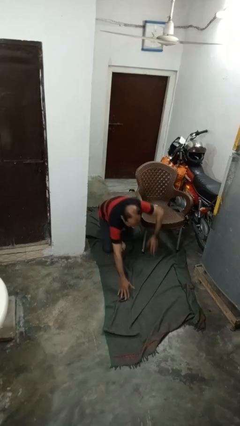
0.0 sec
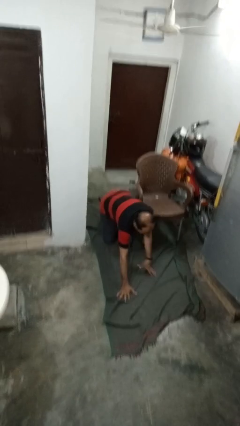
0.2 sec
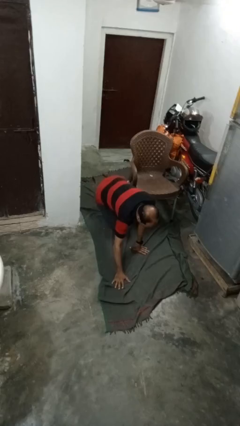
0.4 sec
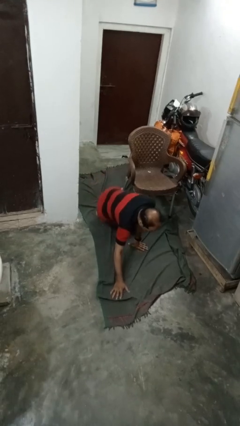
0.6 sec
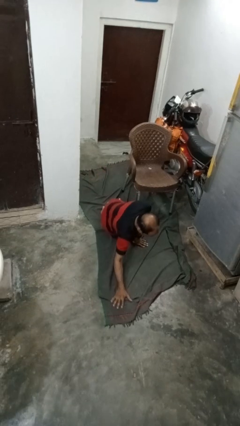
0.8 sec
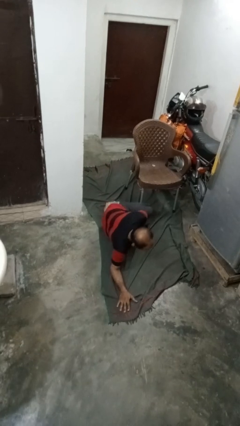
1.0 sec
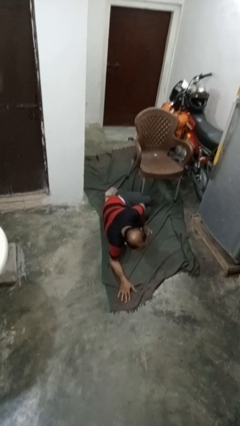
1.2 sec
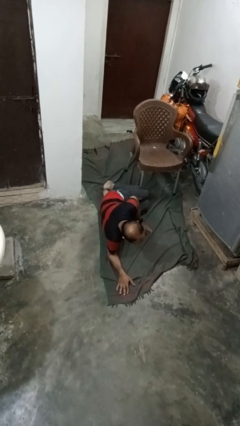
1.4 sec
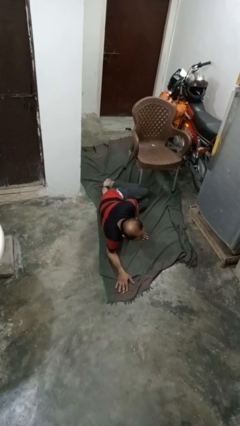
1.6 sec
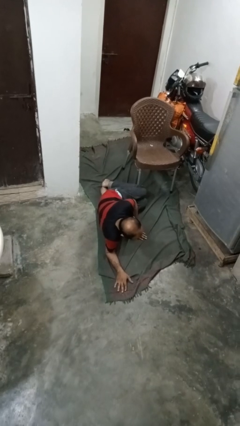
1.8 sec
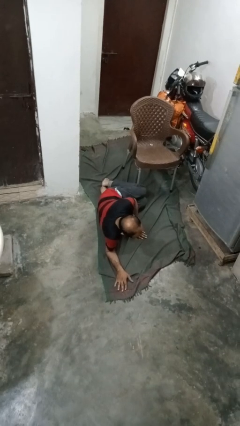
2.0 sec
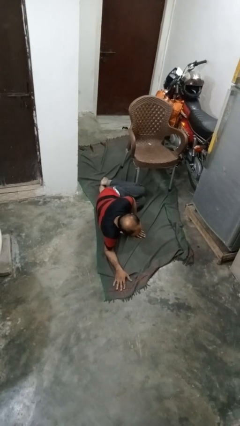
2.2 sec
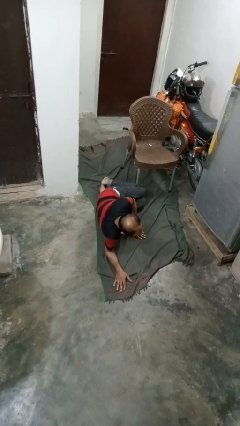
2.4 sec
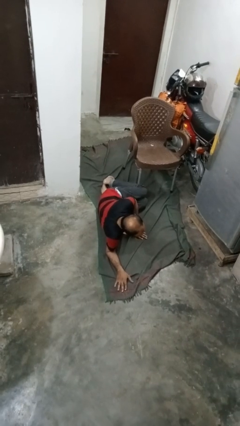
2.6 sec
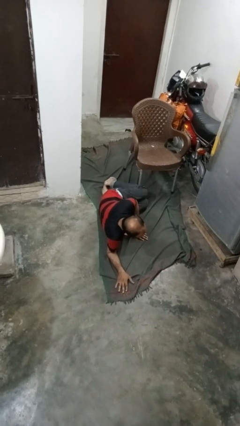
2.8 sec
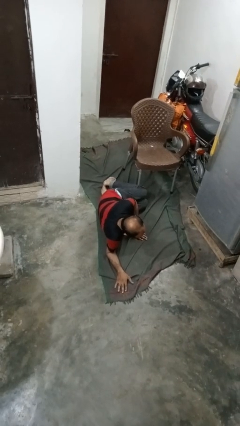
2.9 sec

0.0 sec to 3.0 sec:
person lies down on floor

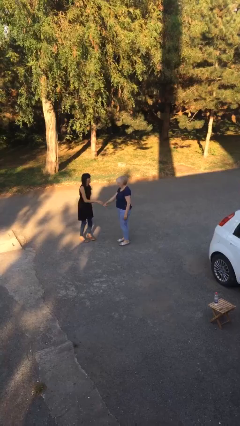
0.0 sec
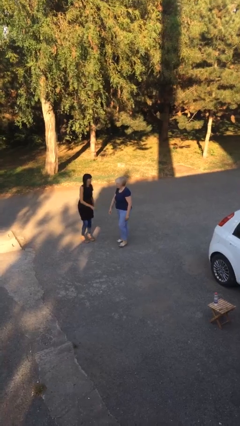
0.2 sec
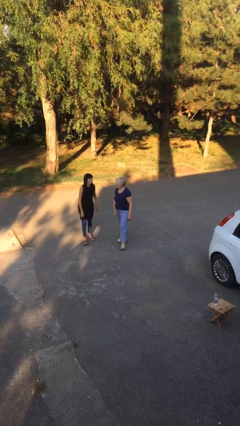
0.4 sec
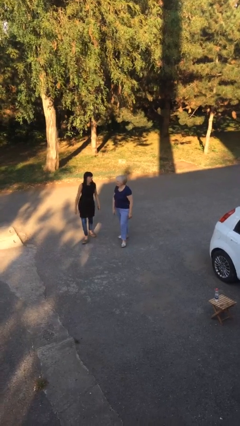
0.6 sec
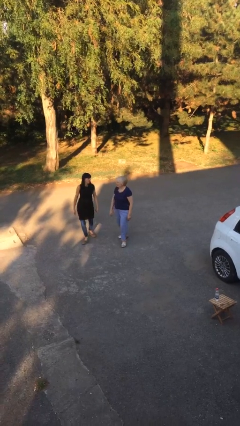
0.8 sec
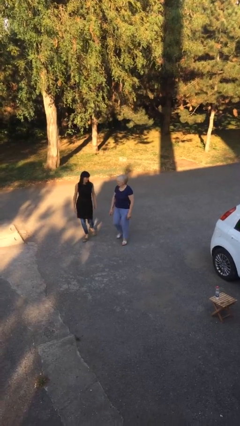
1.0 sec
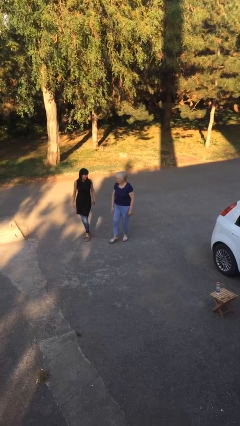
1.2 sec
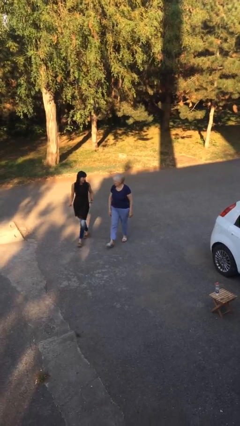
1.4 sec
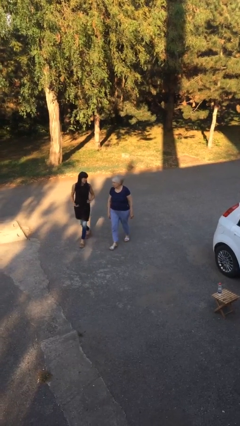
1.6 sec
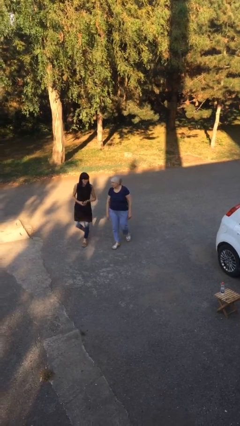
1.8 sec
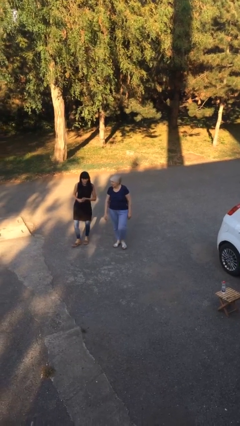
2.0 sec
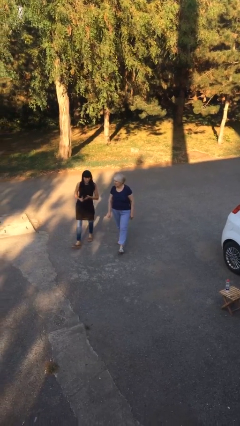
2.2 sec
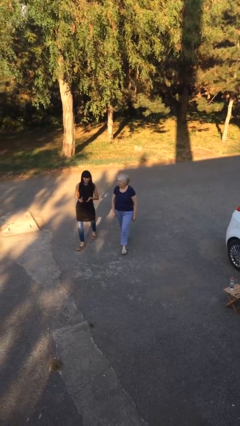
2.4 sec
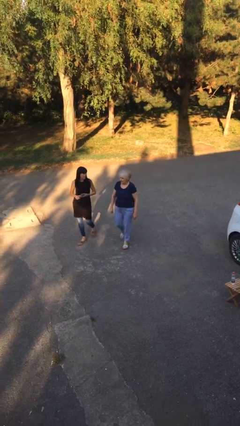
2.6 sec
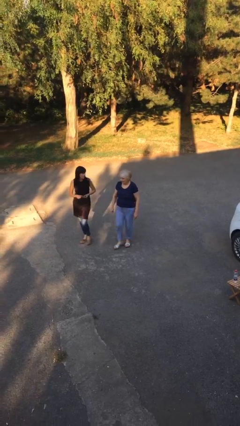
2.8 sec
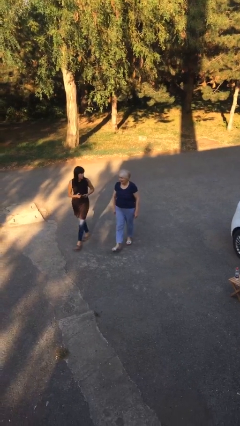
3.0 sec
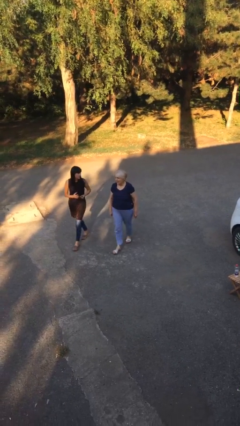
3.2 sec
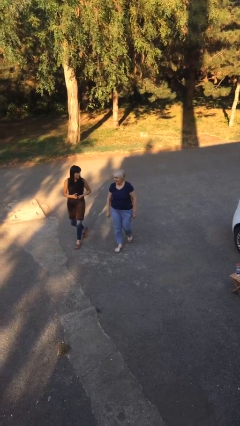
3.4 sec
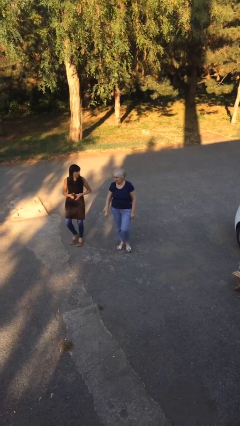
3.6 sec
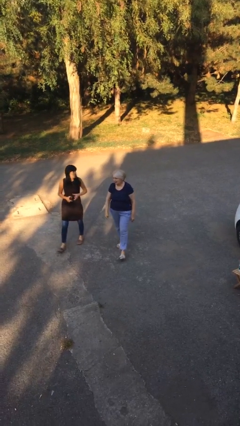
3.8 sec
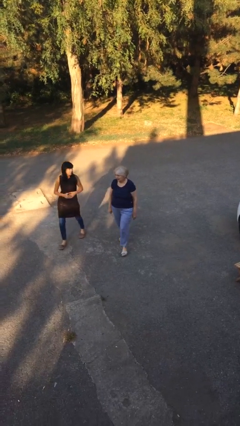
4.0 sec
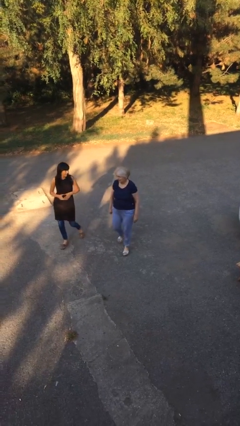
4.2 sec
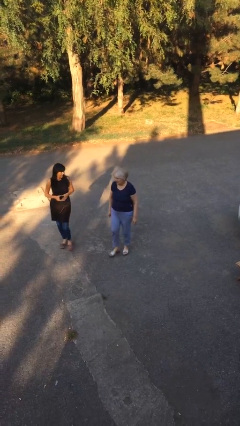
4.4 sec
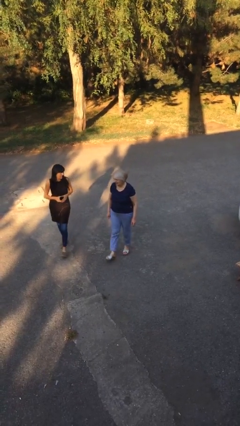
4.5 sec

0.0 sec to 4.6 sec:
person talks to person

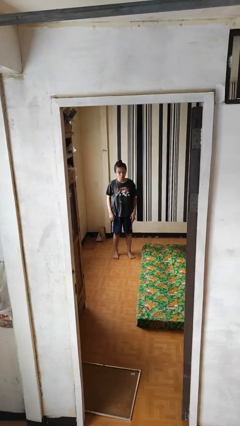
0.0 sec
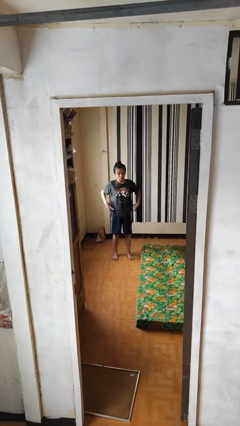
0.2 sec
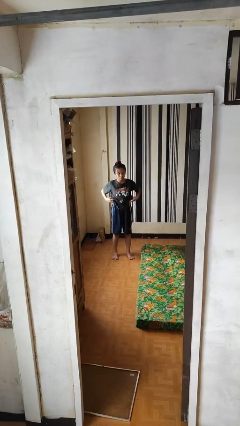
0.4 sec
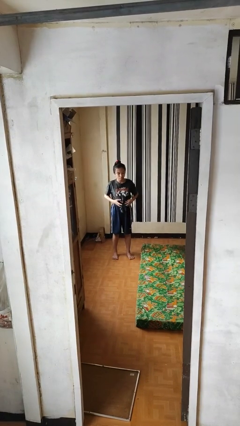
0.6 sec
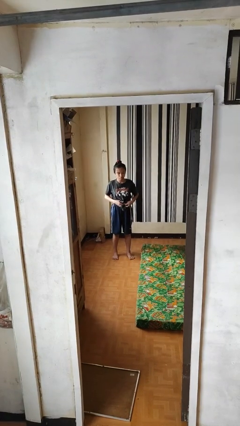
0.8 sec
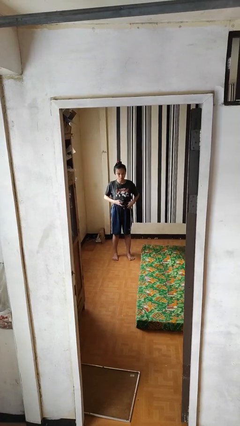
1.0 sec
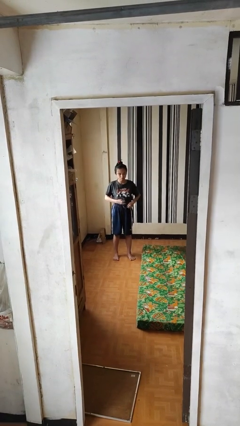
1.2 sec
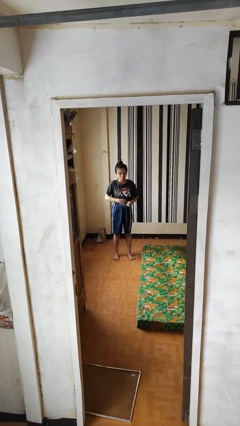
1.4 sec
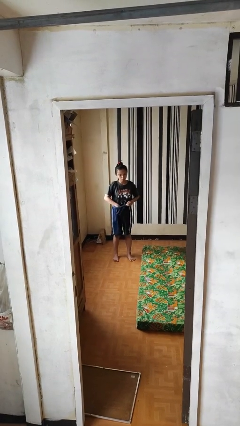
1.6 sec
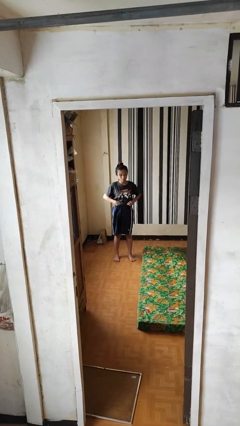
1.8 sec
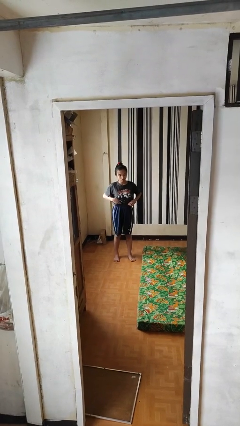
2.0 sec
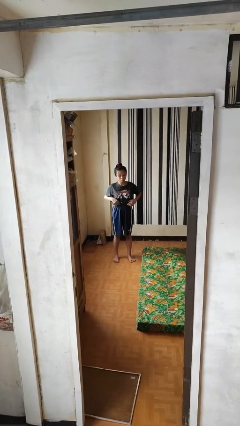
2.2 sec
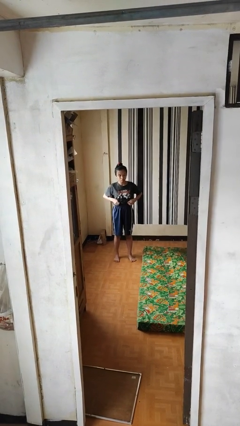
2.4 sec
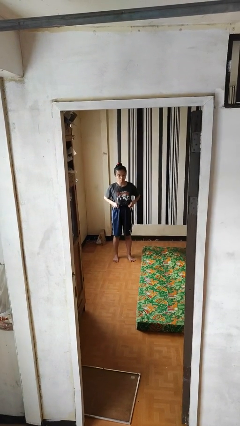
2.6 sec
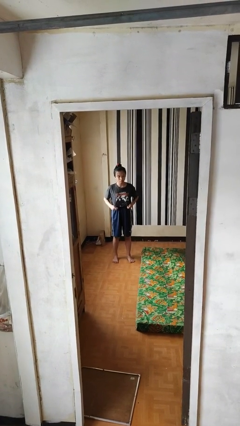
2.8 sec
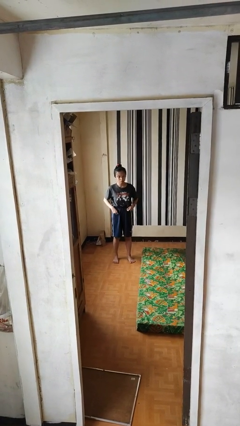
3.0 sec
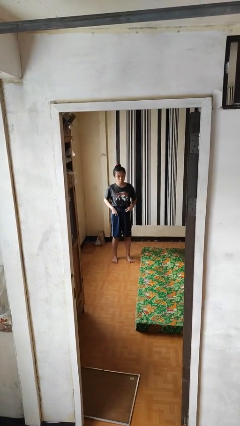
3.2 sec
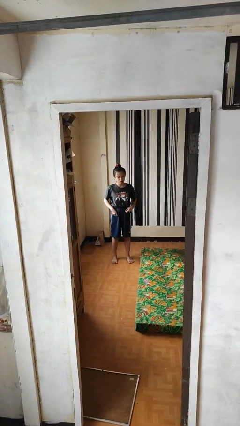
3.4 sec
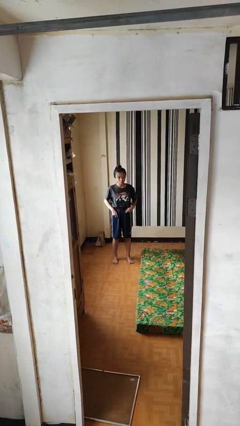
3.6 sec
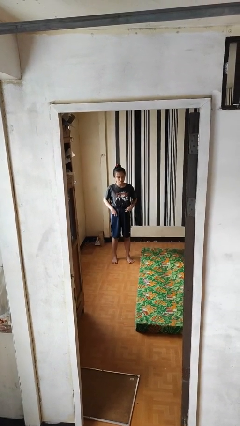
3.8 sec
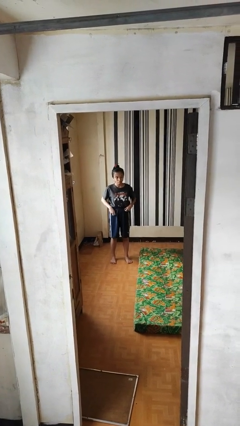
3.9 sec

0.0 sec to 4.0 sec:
person tucks in shirt

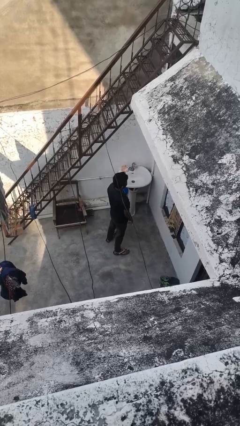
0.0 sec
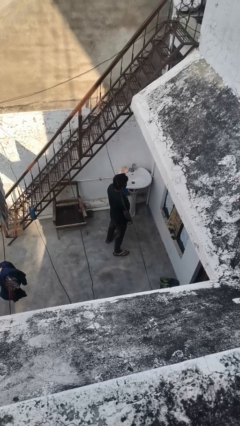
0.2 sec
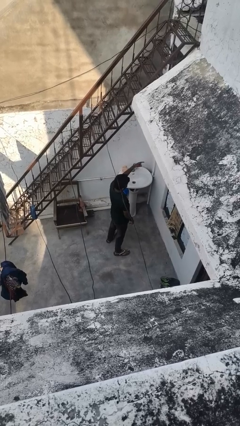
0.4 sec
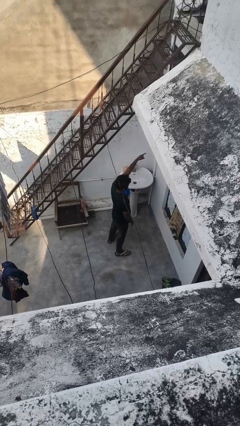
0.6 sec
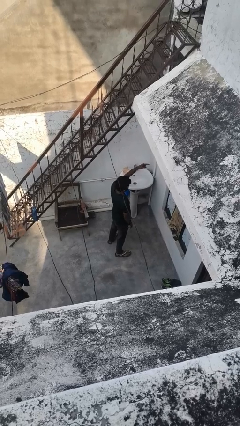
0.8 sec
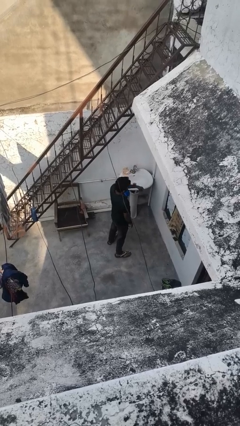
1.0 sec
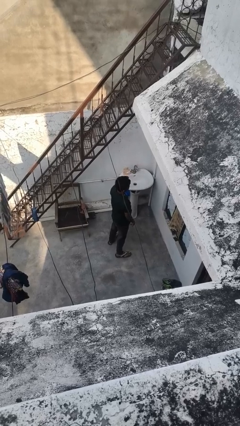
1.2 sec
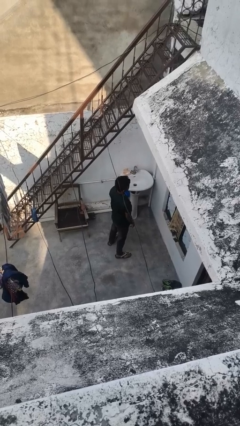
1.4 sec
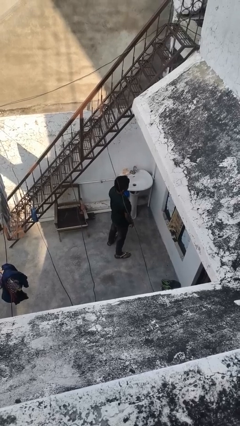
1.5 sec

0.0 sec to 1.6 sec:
person gestures behind me

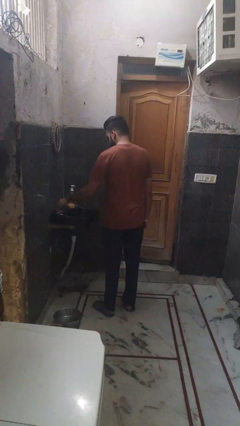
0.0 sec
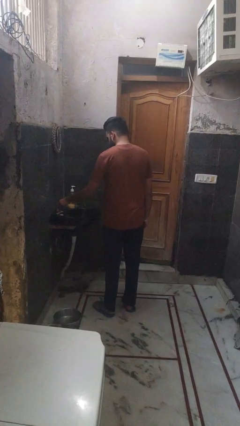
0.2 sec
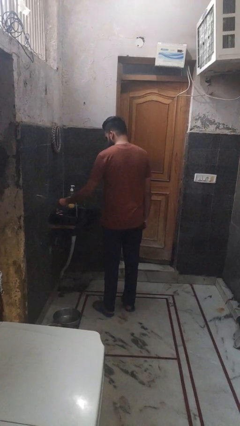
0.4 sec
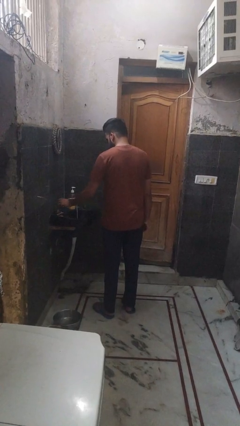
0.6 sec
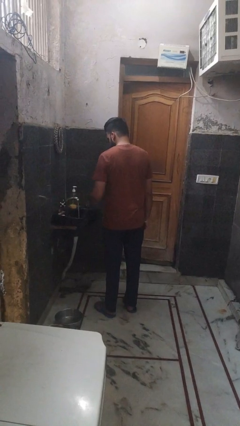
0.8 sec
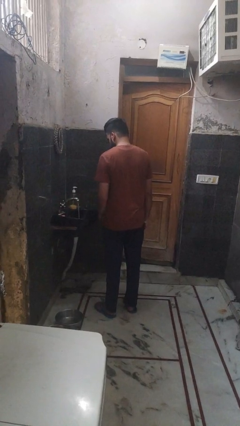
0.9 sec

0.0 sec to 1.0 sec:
person turns on faucet

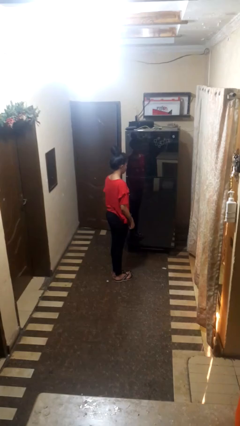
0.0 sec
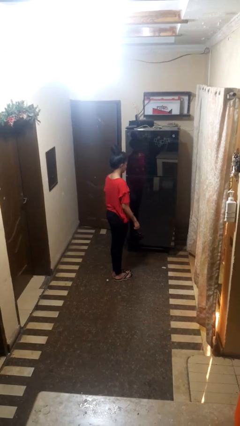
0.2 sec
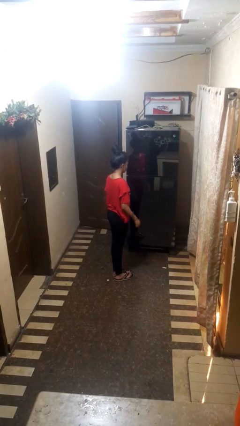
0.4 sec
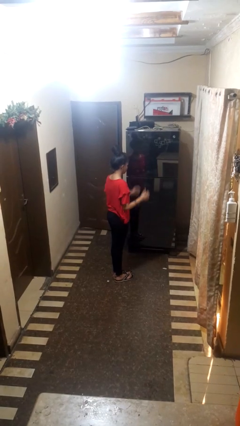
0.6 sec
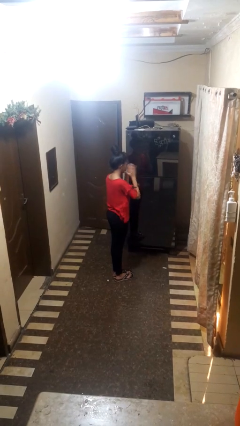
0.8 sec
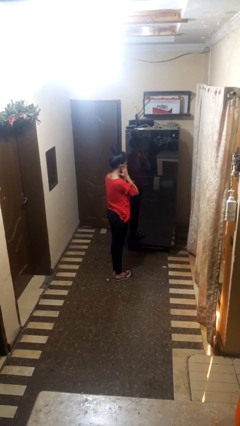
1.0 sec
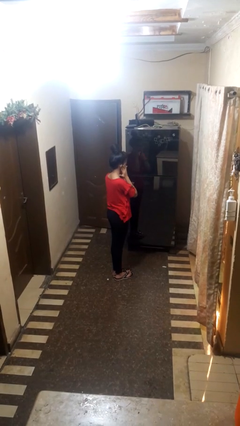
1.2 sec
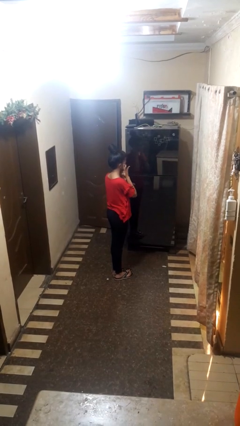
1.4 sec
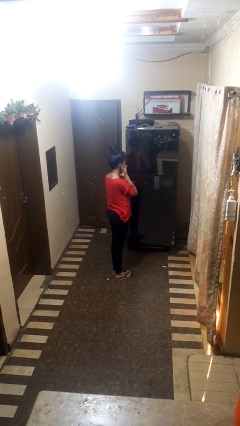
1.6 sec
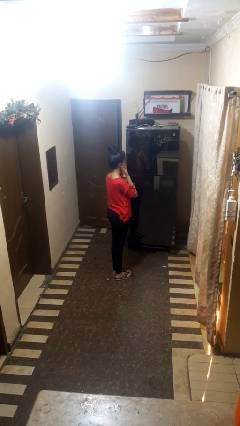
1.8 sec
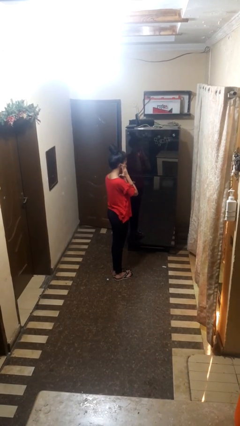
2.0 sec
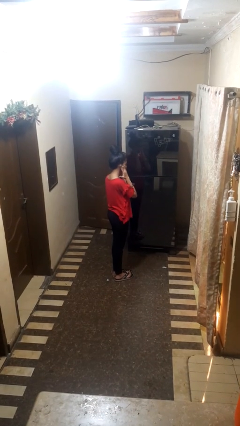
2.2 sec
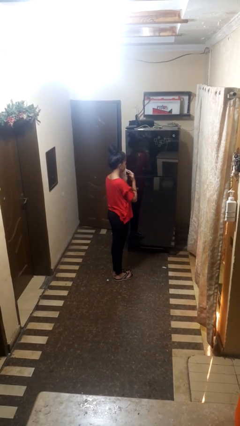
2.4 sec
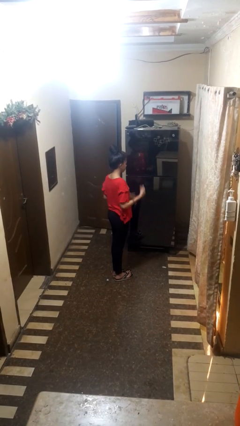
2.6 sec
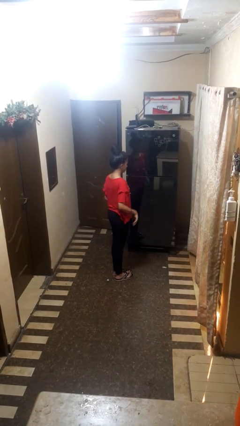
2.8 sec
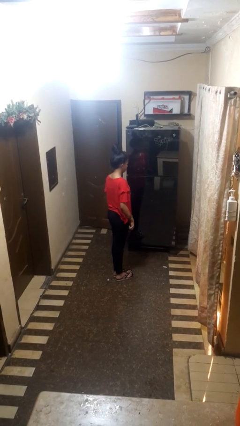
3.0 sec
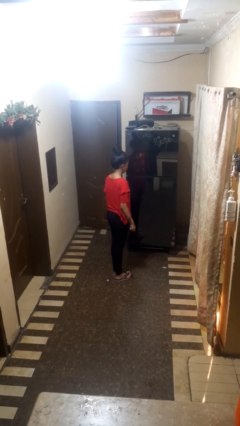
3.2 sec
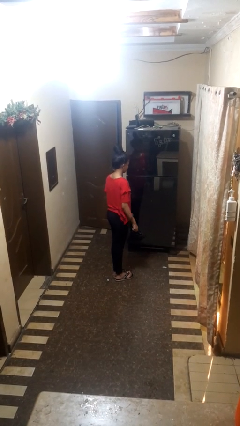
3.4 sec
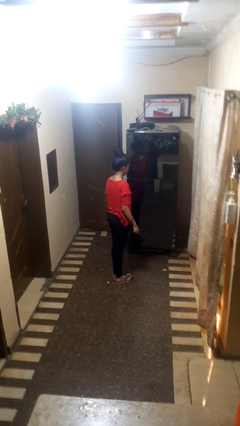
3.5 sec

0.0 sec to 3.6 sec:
person touches earlobe
